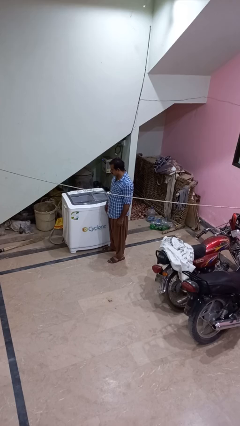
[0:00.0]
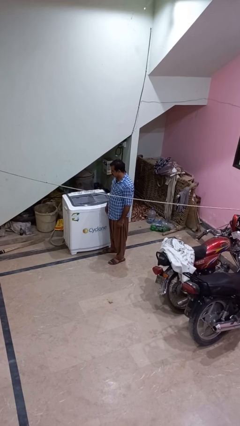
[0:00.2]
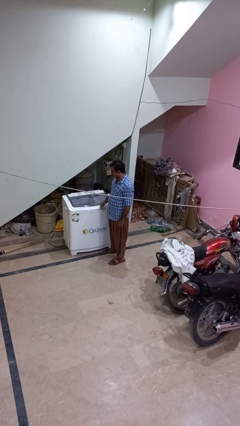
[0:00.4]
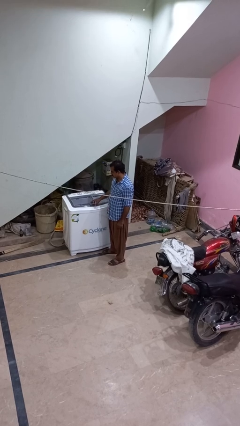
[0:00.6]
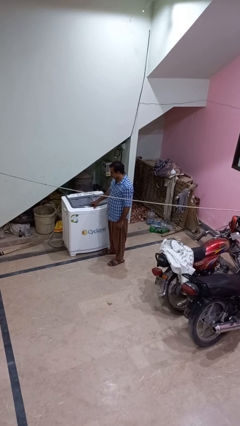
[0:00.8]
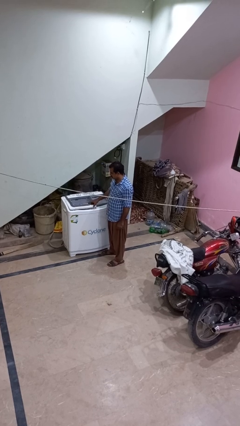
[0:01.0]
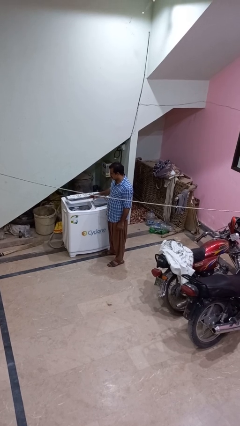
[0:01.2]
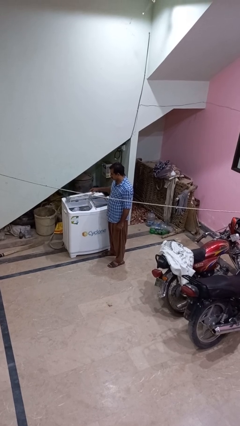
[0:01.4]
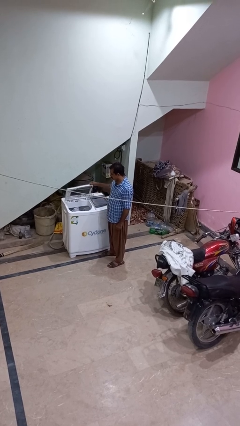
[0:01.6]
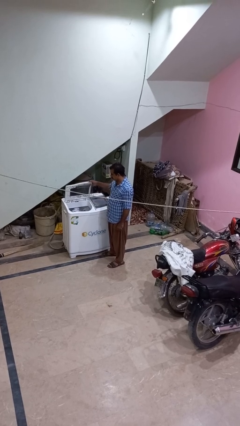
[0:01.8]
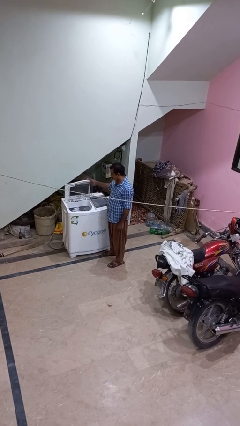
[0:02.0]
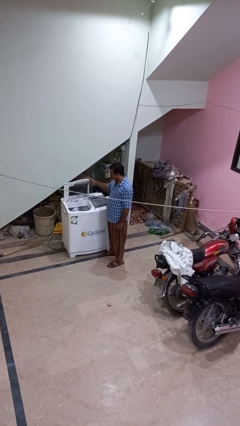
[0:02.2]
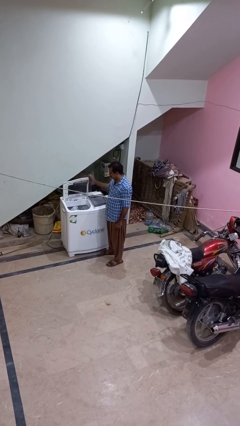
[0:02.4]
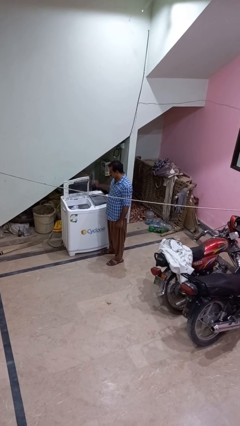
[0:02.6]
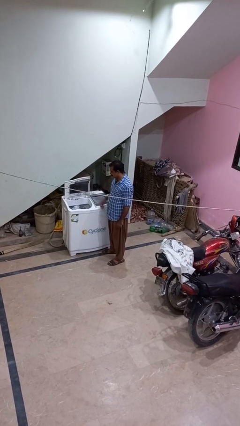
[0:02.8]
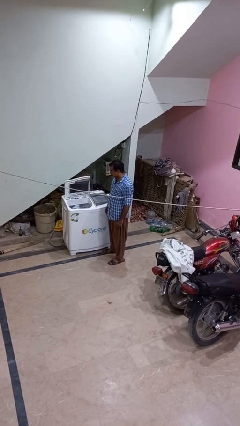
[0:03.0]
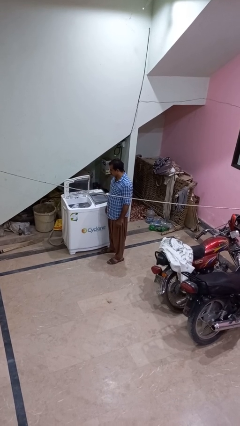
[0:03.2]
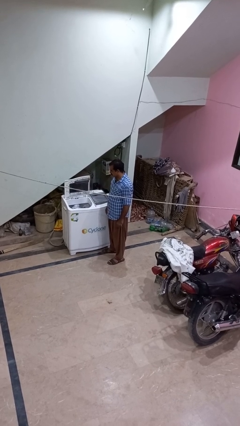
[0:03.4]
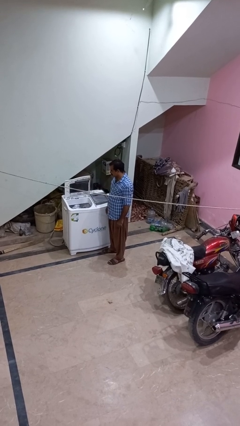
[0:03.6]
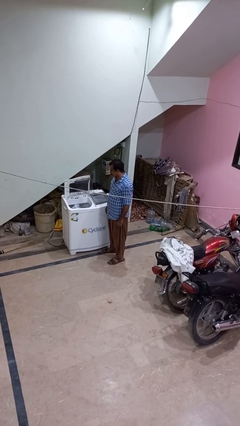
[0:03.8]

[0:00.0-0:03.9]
person opens clothes washer

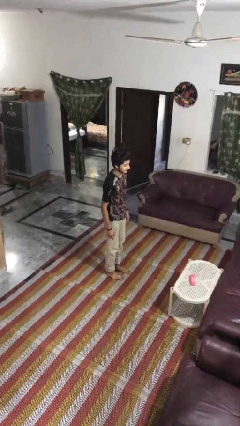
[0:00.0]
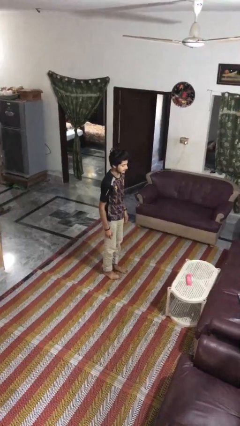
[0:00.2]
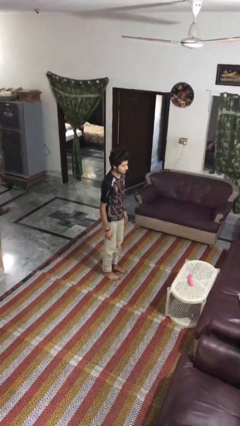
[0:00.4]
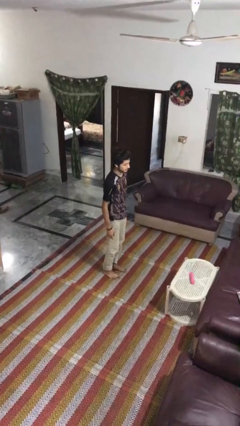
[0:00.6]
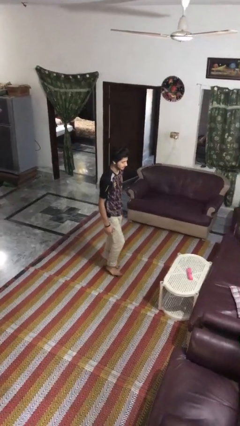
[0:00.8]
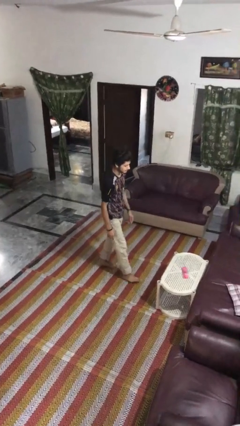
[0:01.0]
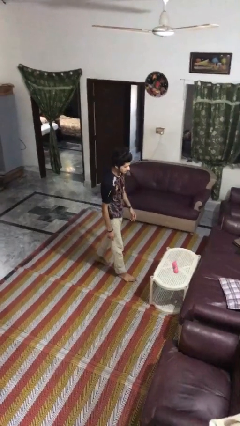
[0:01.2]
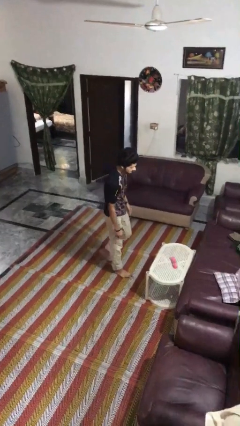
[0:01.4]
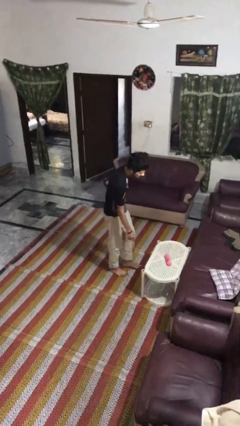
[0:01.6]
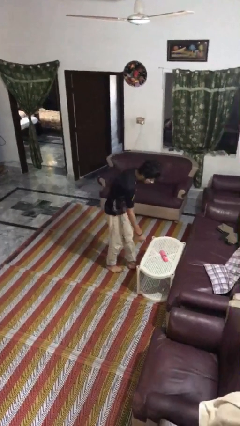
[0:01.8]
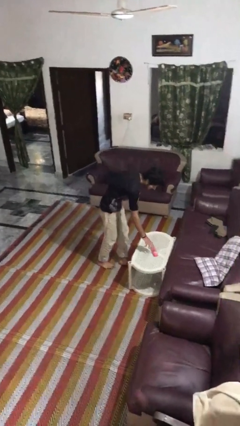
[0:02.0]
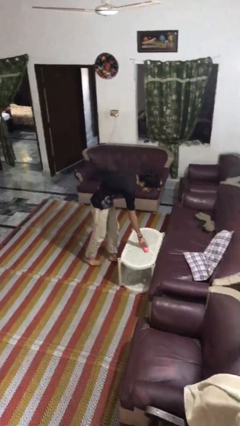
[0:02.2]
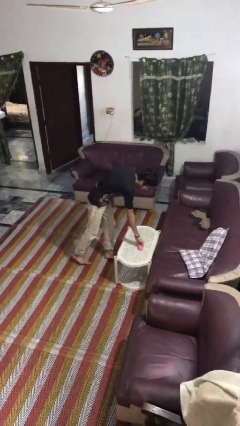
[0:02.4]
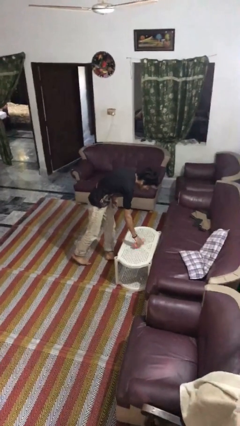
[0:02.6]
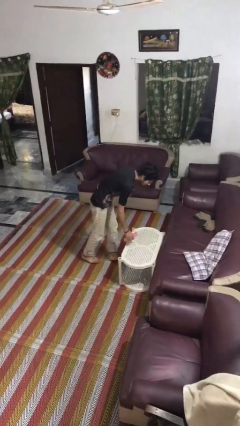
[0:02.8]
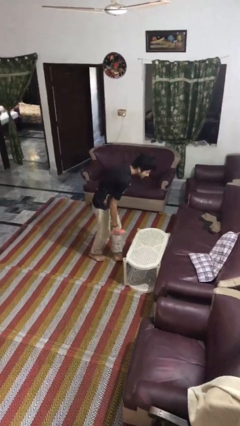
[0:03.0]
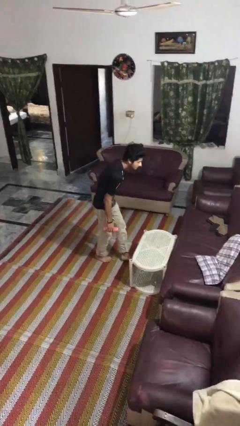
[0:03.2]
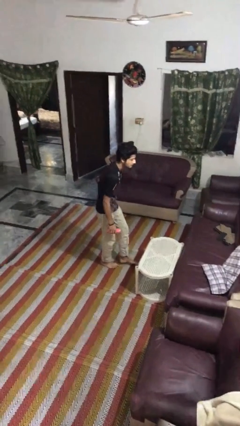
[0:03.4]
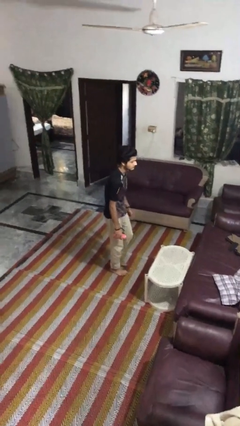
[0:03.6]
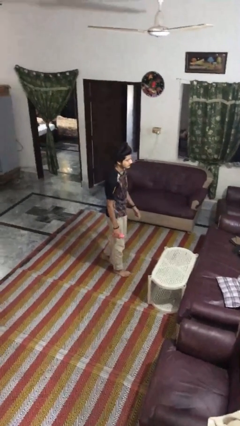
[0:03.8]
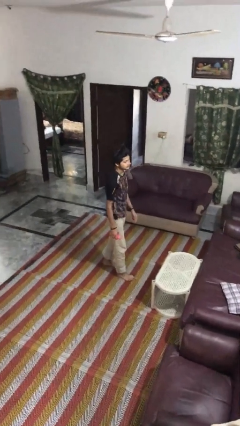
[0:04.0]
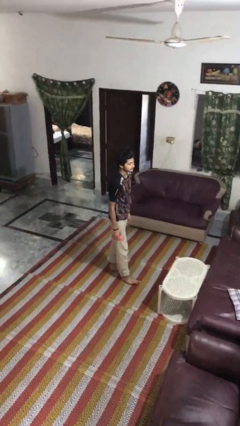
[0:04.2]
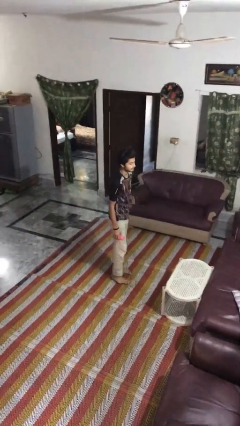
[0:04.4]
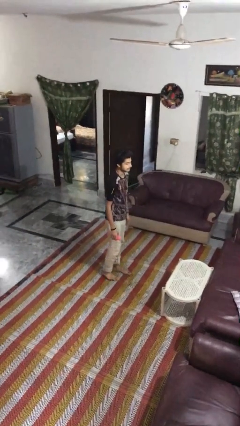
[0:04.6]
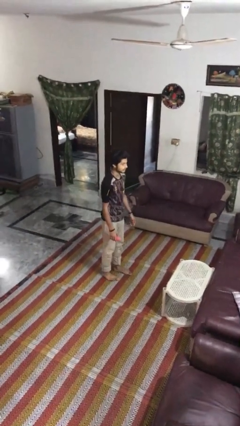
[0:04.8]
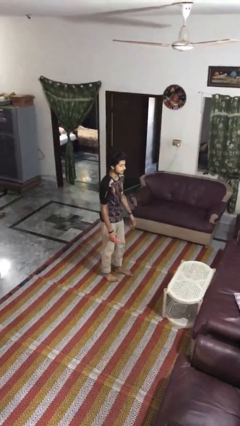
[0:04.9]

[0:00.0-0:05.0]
person picks up object from table

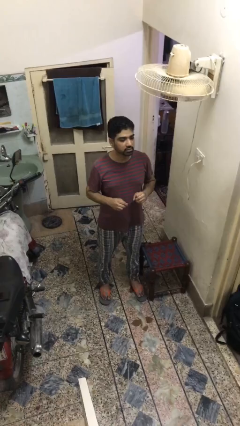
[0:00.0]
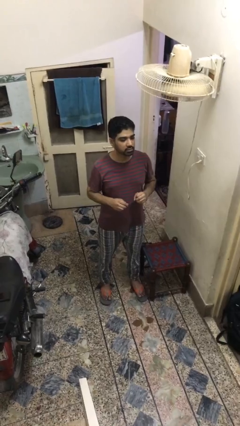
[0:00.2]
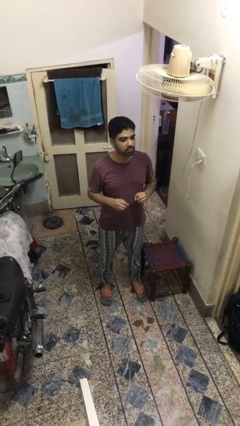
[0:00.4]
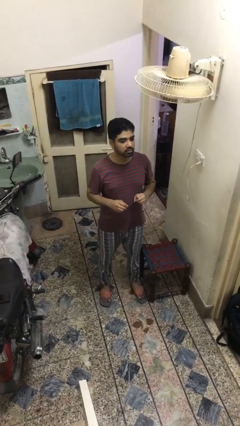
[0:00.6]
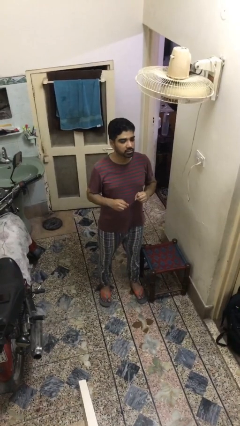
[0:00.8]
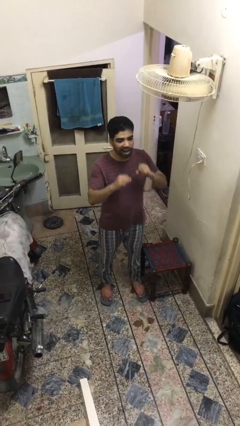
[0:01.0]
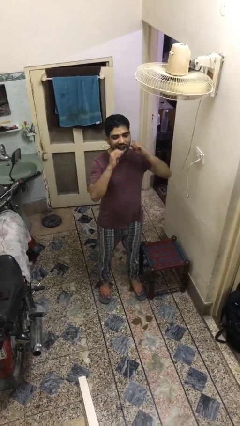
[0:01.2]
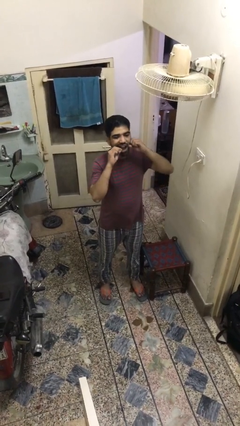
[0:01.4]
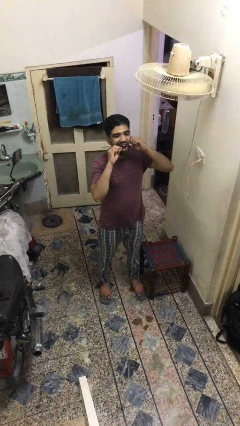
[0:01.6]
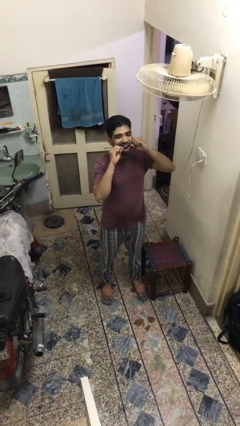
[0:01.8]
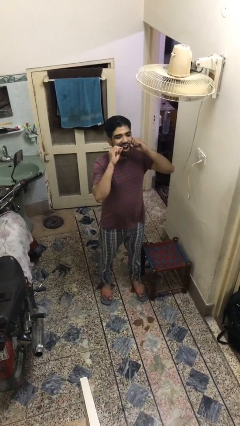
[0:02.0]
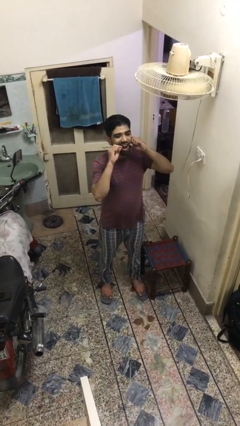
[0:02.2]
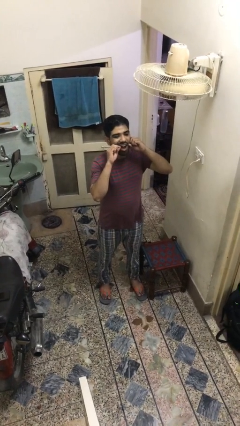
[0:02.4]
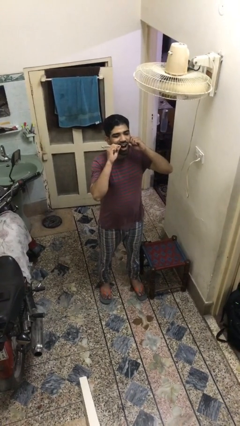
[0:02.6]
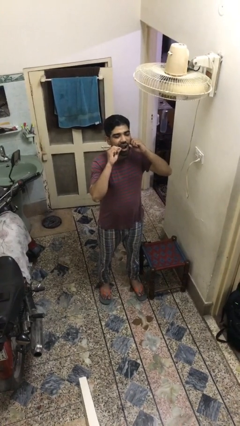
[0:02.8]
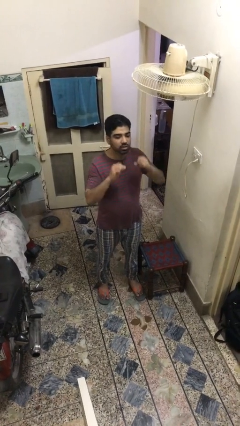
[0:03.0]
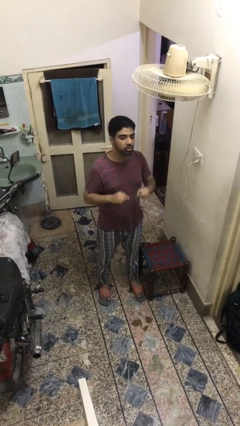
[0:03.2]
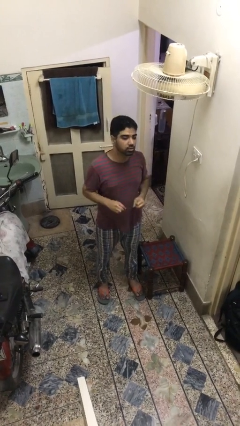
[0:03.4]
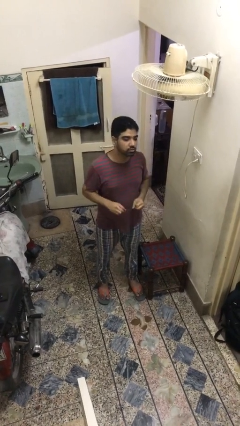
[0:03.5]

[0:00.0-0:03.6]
person flosses

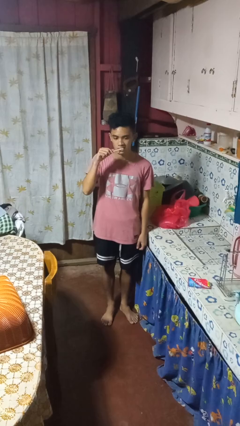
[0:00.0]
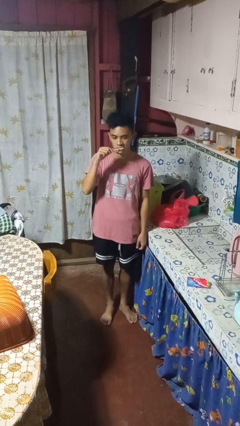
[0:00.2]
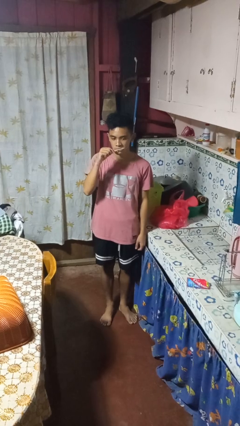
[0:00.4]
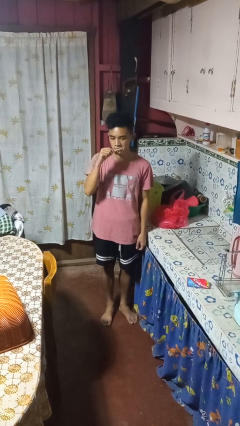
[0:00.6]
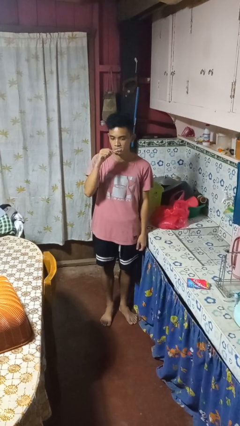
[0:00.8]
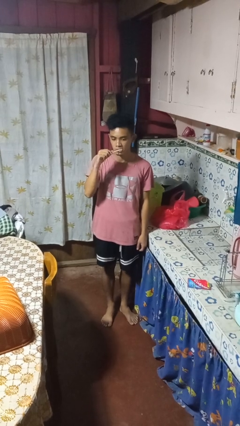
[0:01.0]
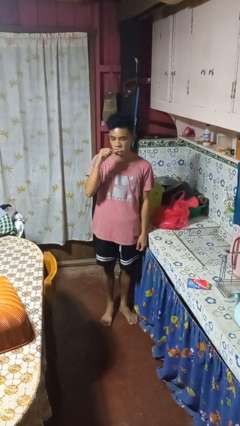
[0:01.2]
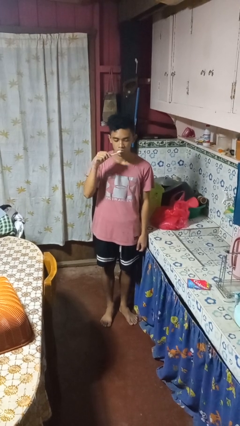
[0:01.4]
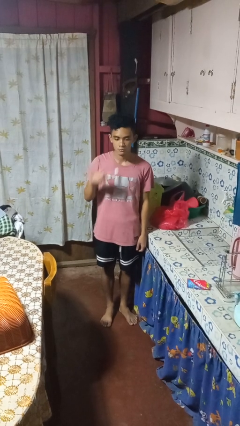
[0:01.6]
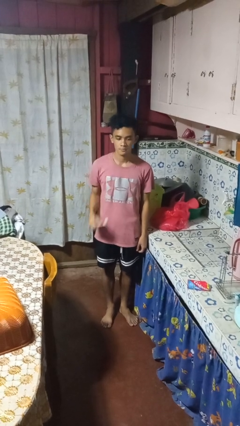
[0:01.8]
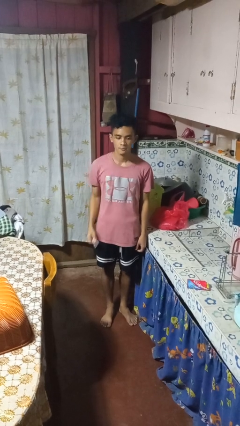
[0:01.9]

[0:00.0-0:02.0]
person brushes teeth

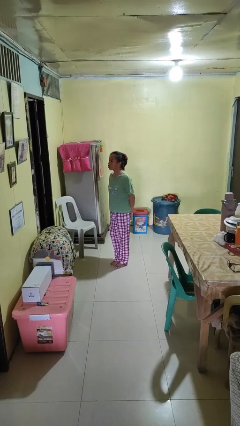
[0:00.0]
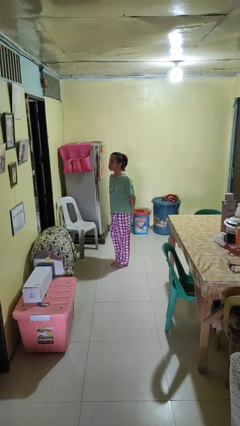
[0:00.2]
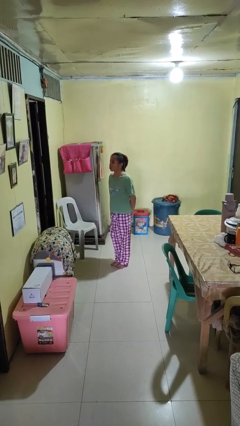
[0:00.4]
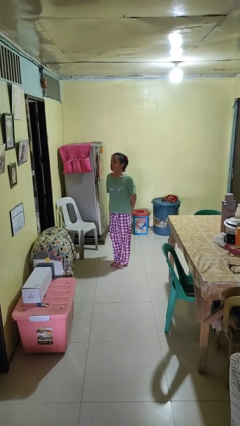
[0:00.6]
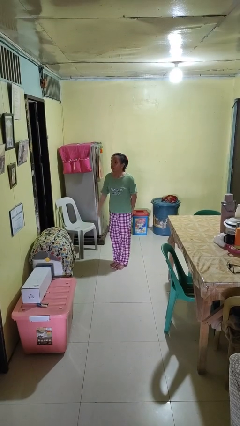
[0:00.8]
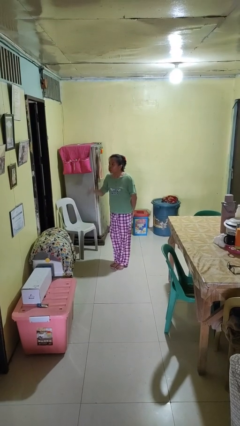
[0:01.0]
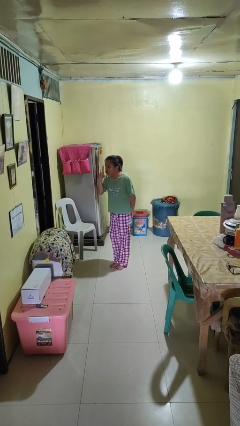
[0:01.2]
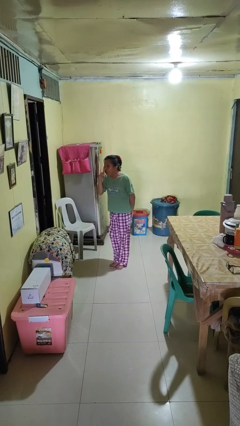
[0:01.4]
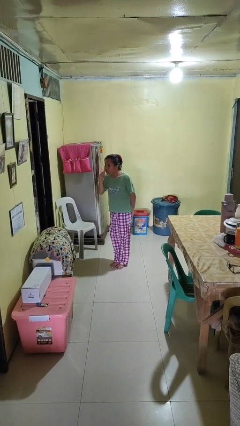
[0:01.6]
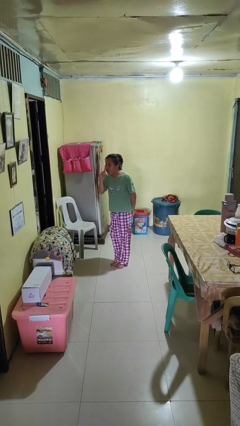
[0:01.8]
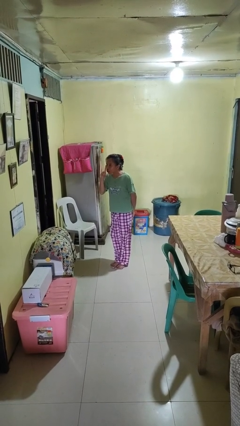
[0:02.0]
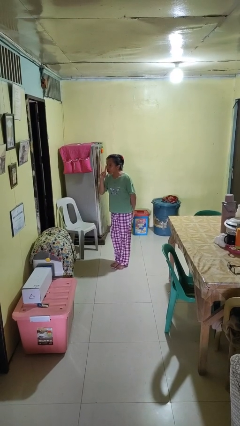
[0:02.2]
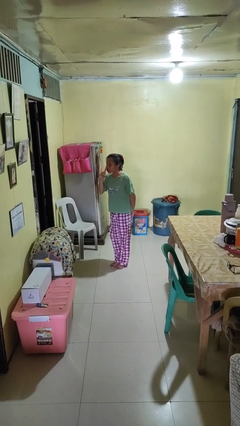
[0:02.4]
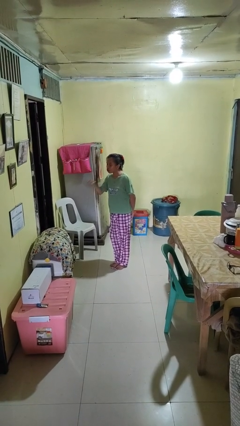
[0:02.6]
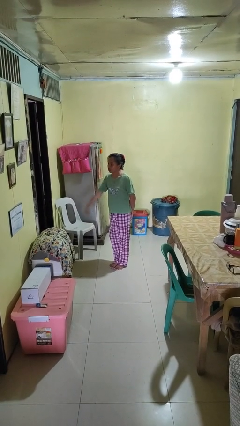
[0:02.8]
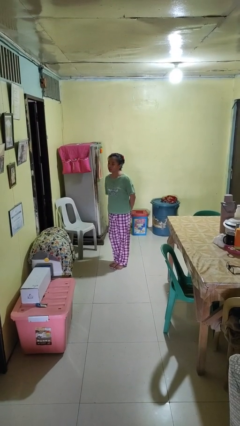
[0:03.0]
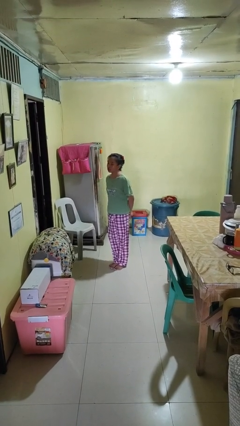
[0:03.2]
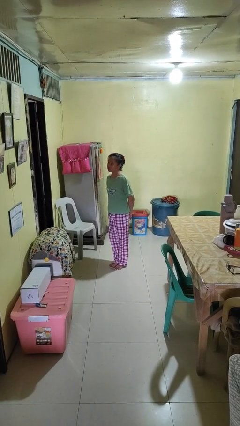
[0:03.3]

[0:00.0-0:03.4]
person gestures be quiet

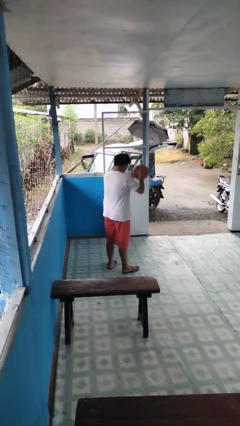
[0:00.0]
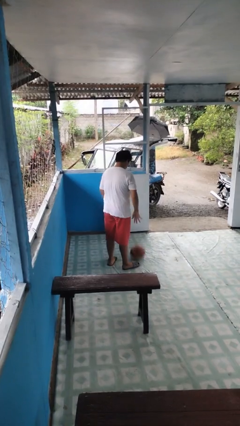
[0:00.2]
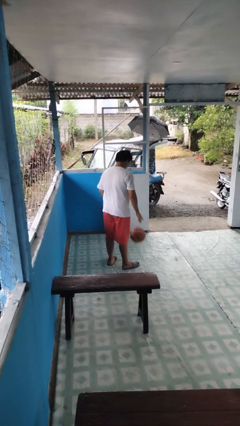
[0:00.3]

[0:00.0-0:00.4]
person bounces ball on floor
